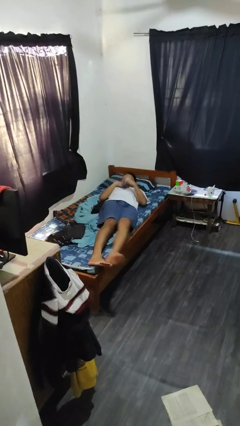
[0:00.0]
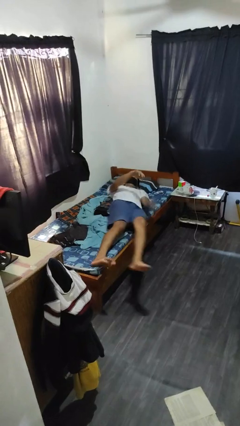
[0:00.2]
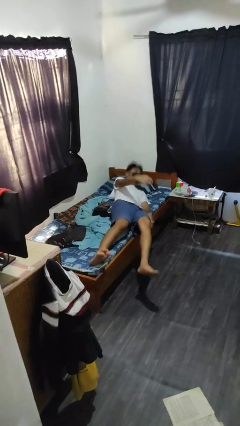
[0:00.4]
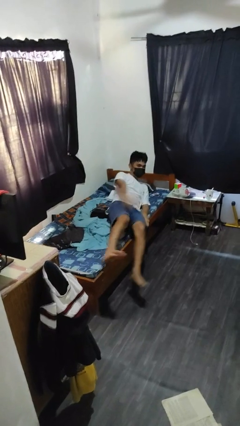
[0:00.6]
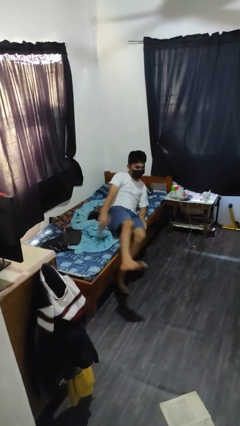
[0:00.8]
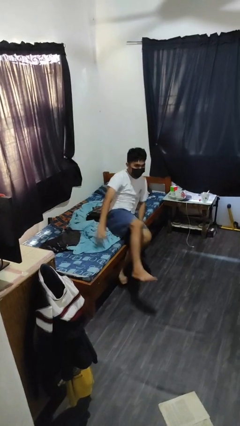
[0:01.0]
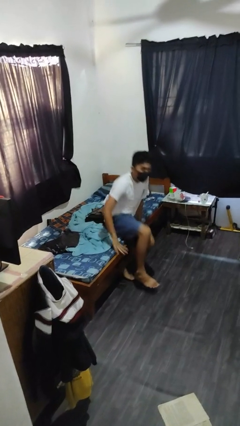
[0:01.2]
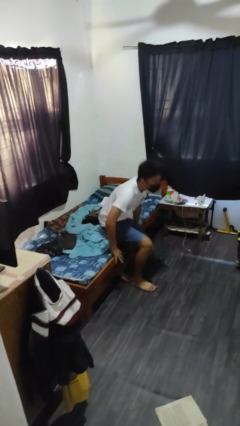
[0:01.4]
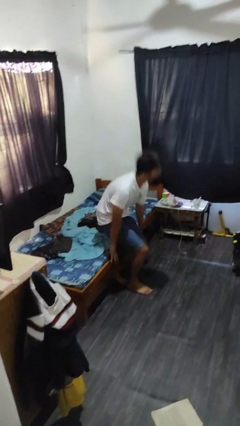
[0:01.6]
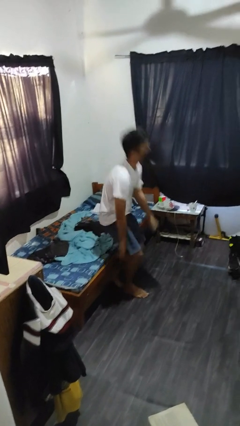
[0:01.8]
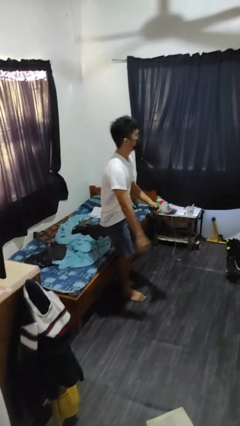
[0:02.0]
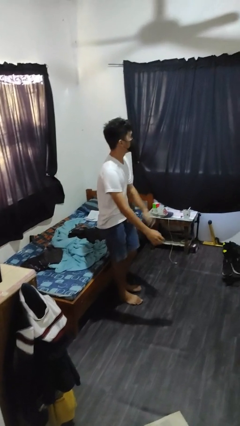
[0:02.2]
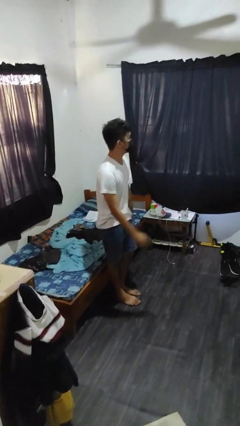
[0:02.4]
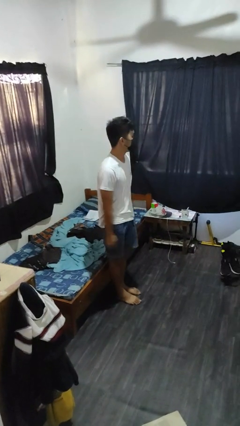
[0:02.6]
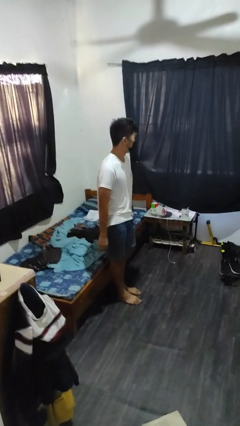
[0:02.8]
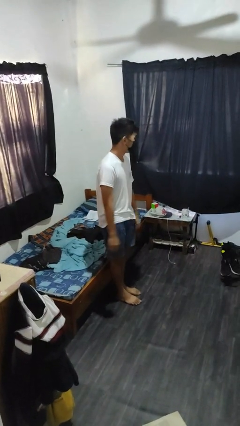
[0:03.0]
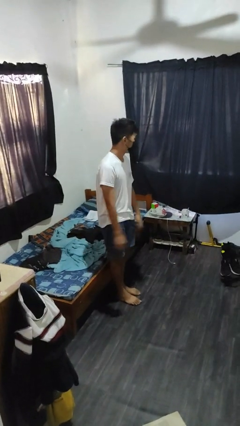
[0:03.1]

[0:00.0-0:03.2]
person stands up

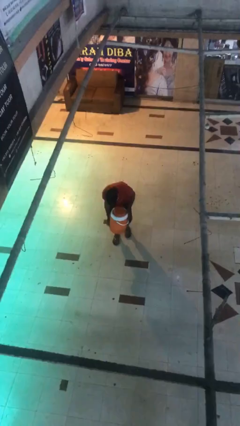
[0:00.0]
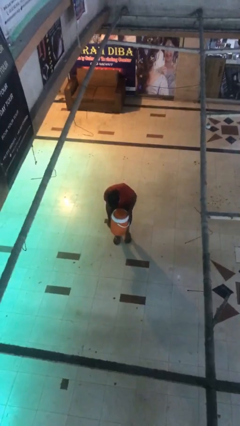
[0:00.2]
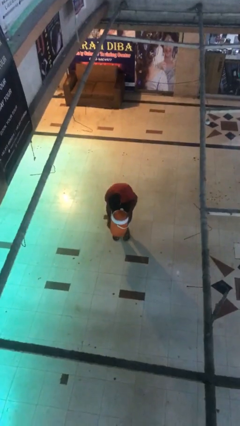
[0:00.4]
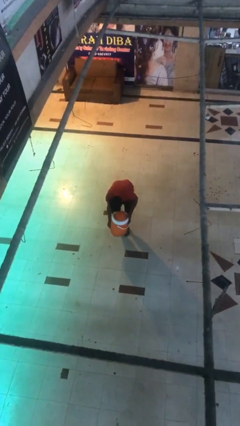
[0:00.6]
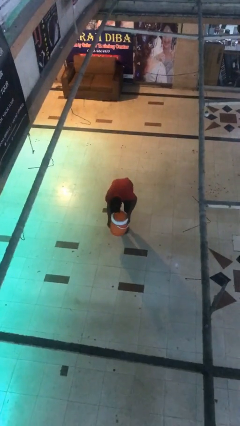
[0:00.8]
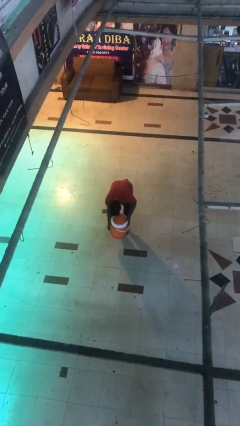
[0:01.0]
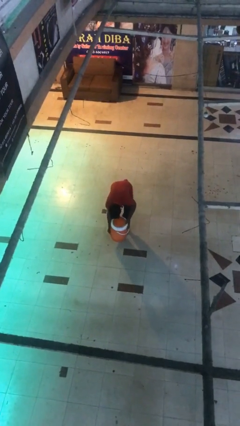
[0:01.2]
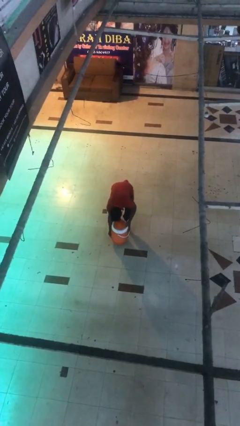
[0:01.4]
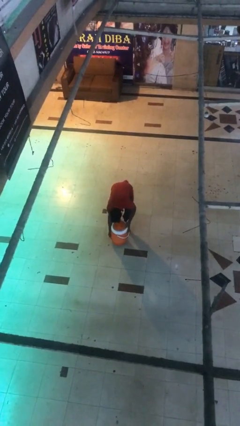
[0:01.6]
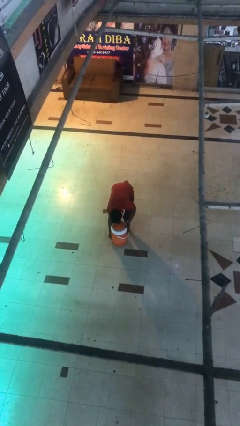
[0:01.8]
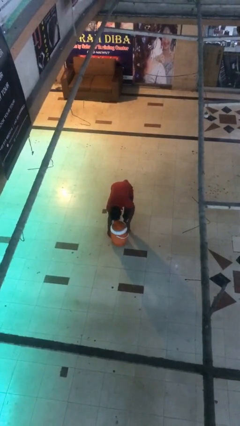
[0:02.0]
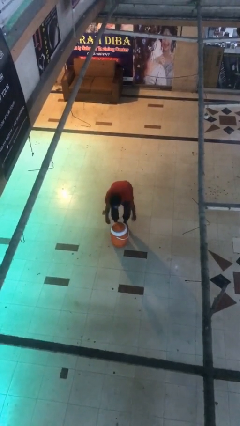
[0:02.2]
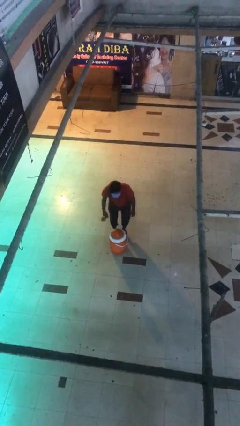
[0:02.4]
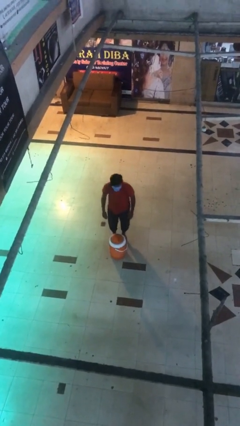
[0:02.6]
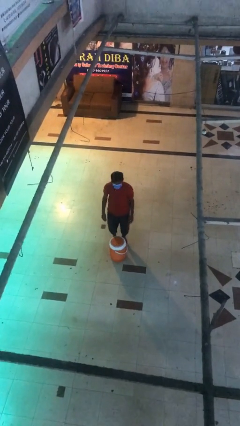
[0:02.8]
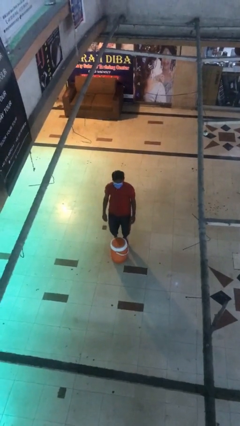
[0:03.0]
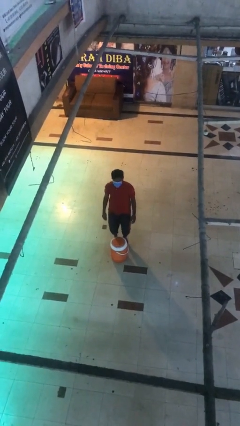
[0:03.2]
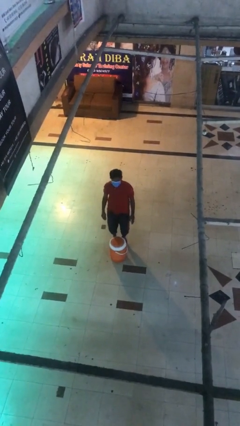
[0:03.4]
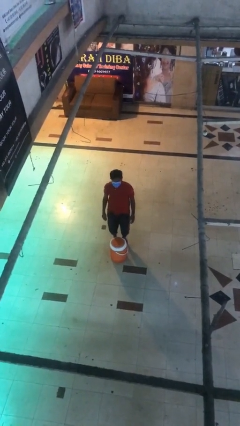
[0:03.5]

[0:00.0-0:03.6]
person puts down object on floor

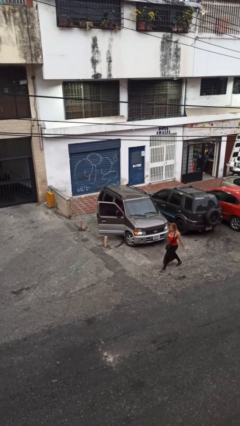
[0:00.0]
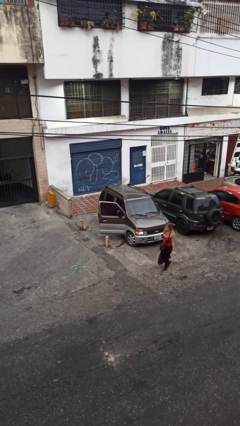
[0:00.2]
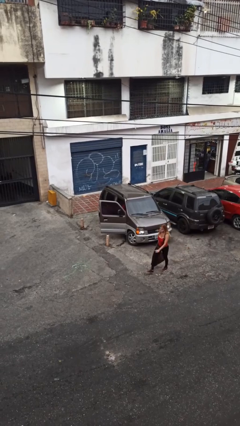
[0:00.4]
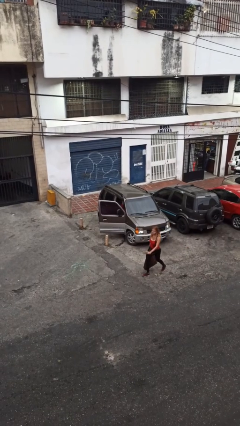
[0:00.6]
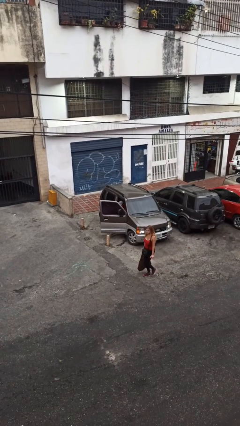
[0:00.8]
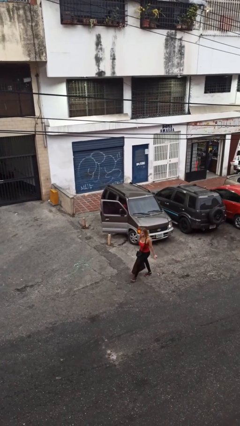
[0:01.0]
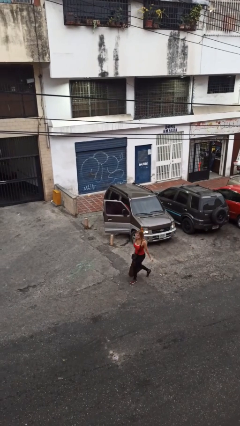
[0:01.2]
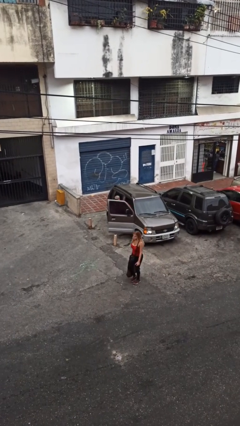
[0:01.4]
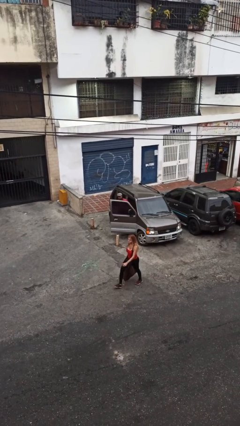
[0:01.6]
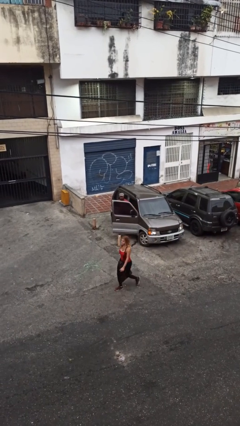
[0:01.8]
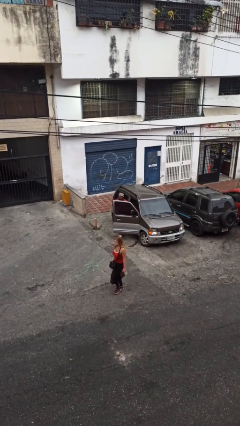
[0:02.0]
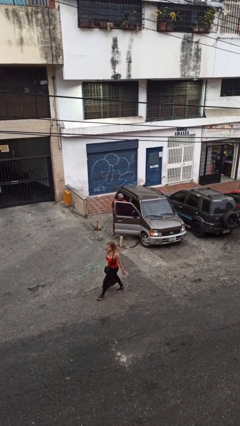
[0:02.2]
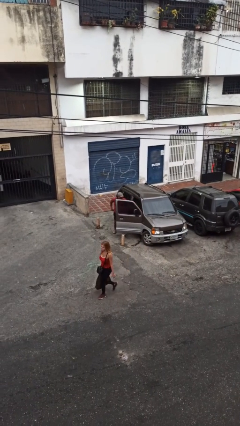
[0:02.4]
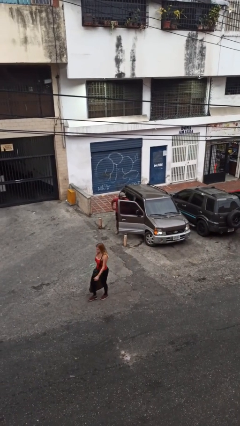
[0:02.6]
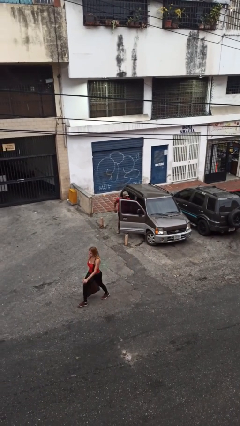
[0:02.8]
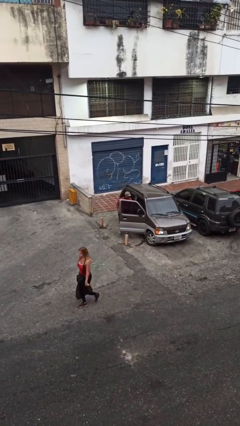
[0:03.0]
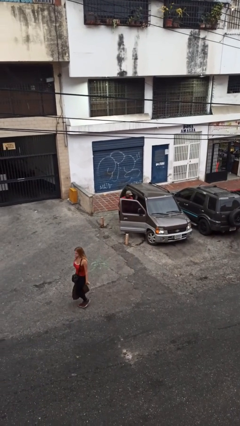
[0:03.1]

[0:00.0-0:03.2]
person exits car

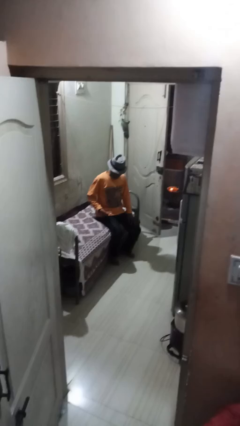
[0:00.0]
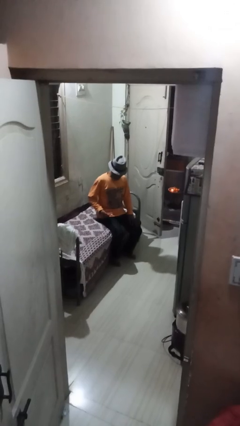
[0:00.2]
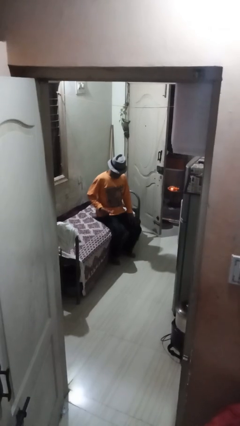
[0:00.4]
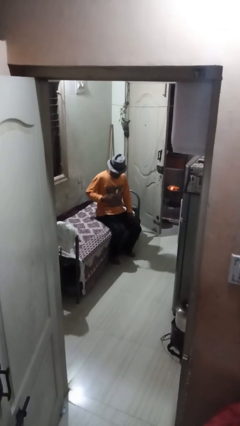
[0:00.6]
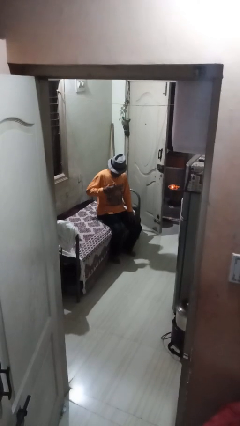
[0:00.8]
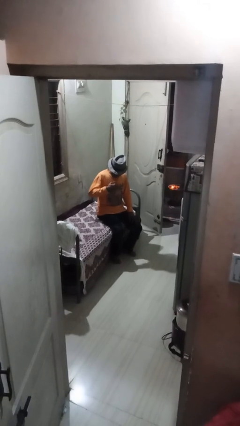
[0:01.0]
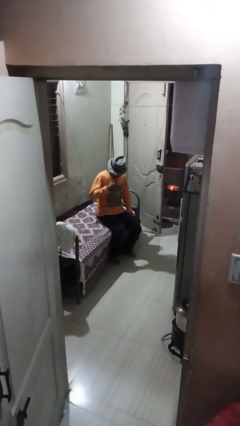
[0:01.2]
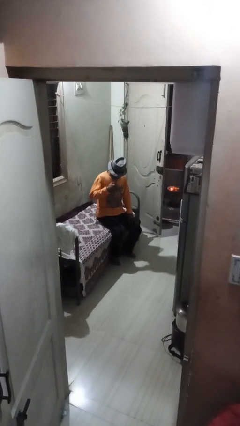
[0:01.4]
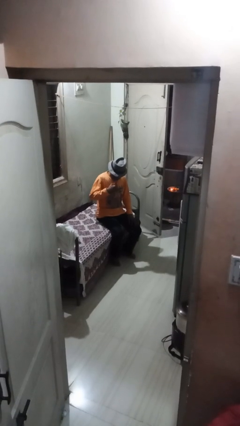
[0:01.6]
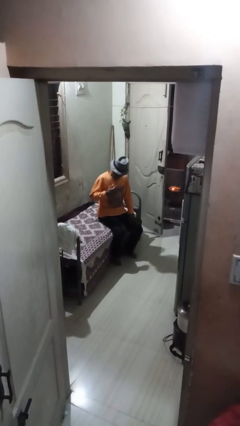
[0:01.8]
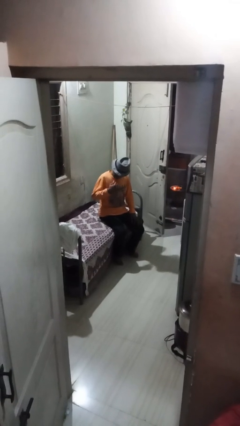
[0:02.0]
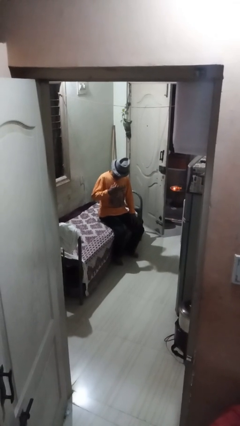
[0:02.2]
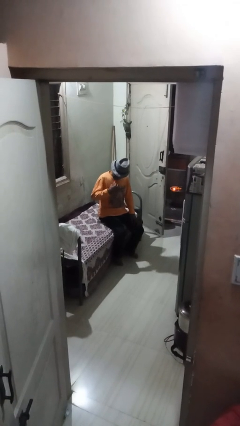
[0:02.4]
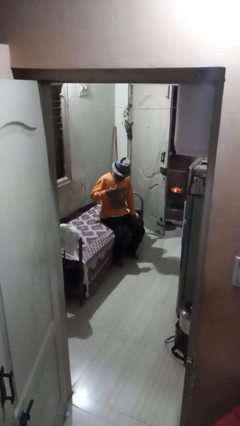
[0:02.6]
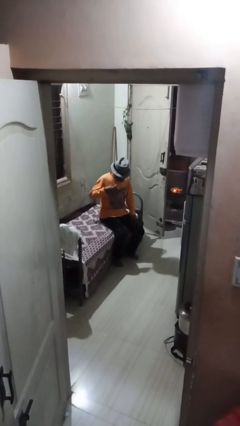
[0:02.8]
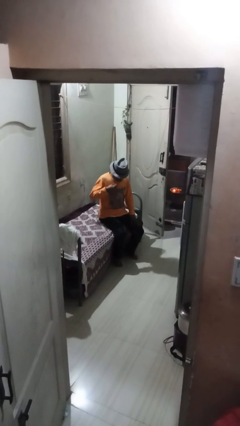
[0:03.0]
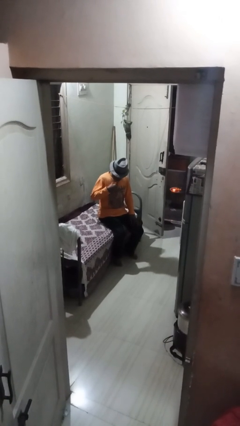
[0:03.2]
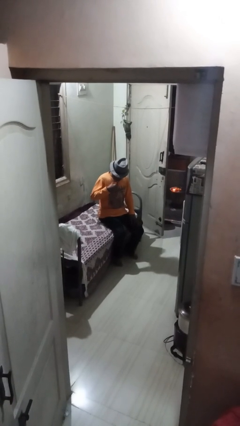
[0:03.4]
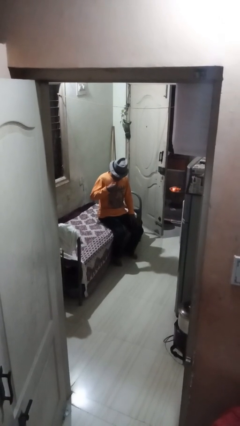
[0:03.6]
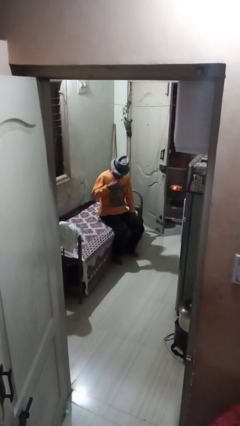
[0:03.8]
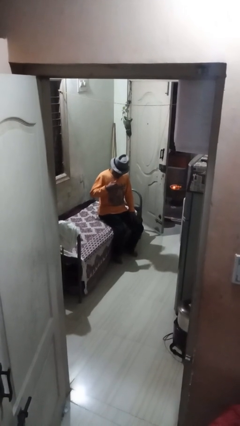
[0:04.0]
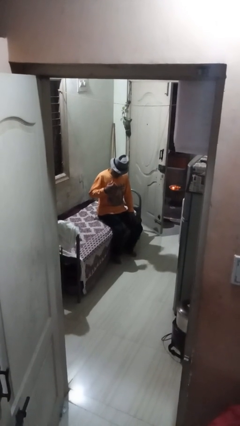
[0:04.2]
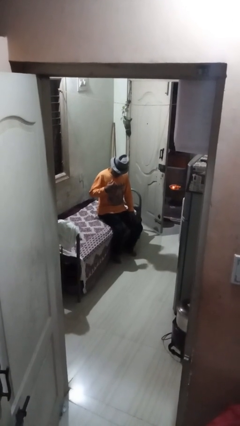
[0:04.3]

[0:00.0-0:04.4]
person brushes teeth

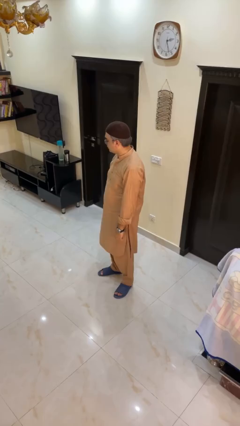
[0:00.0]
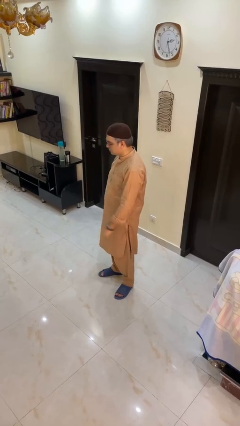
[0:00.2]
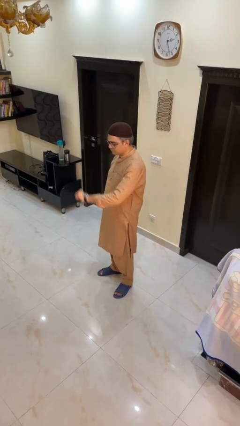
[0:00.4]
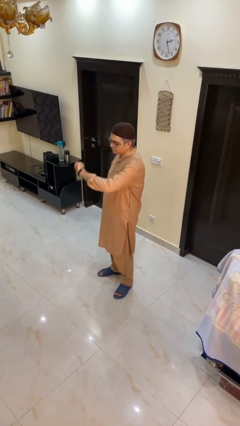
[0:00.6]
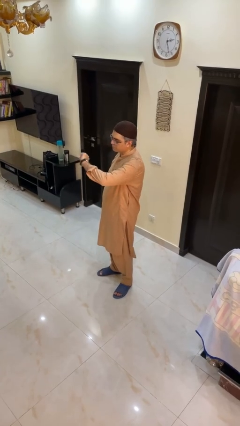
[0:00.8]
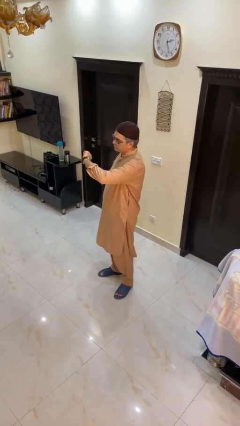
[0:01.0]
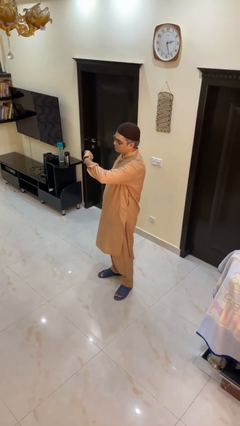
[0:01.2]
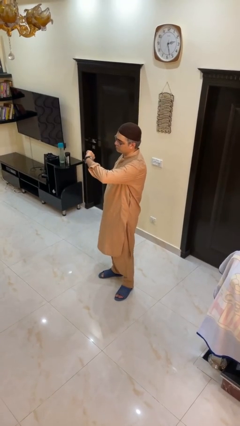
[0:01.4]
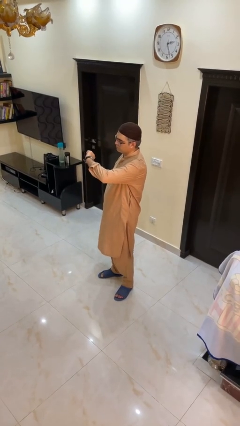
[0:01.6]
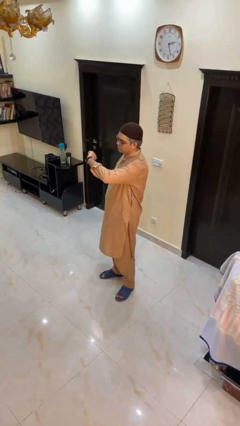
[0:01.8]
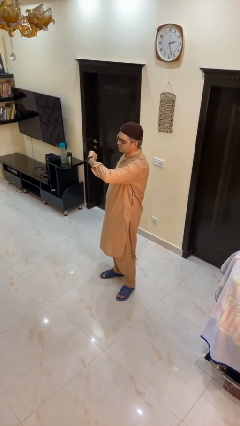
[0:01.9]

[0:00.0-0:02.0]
person looks at wristwatch

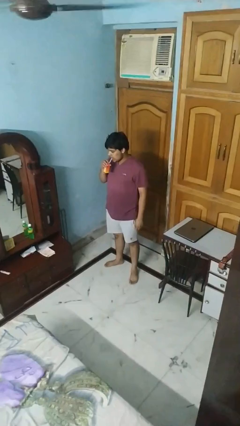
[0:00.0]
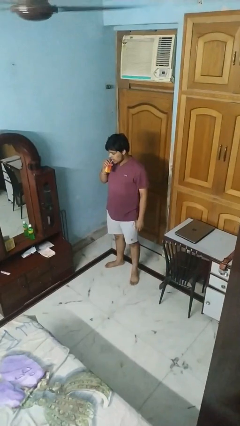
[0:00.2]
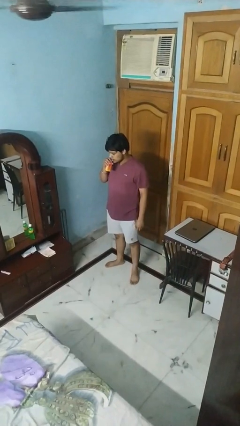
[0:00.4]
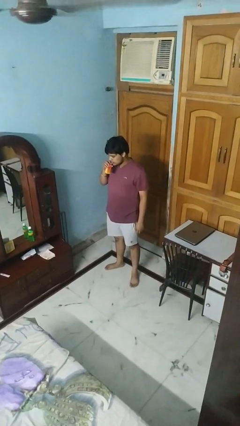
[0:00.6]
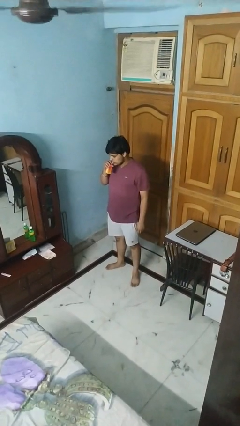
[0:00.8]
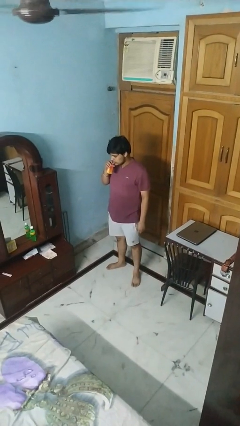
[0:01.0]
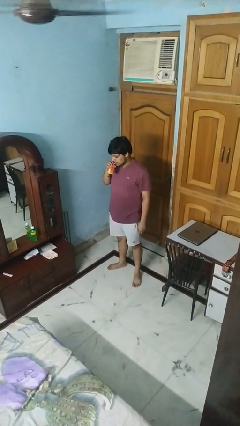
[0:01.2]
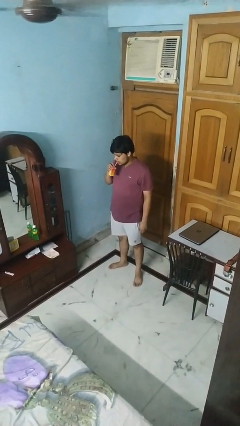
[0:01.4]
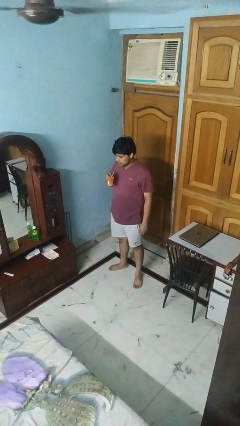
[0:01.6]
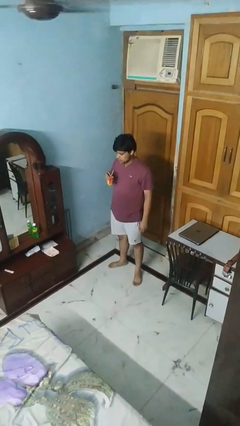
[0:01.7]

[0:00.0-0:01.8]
person drinks from straw
